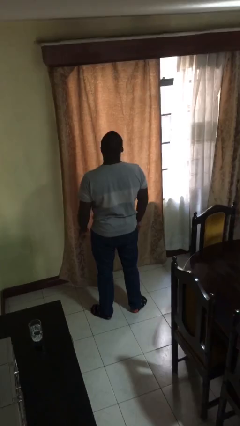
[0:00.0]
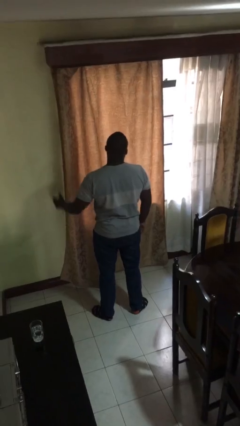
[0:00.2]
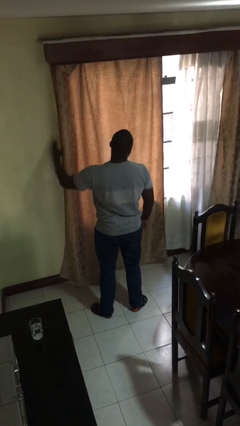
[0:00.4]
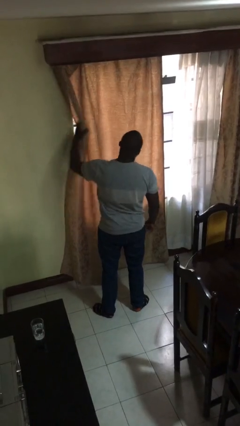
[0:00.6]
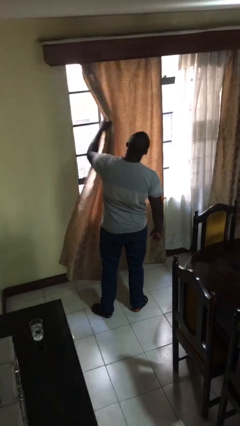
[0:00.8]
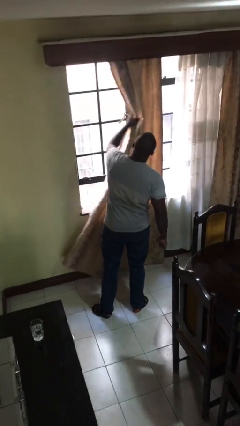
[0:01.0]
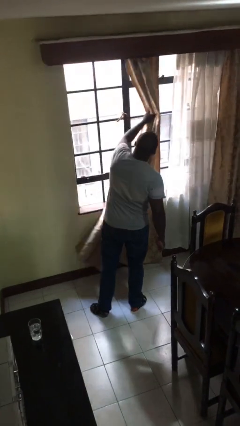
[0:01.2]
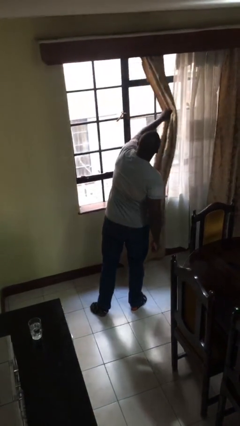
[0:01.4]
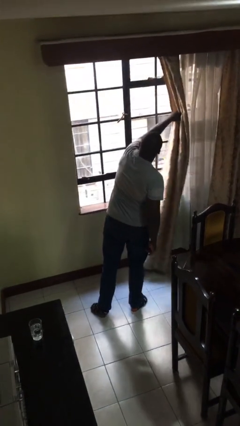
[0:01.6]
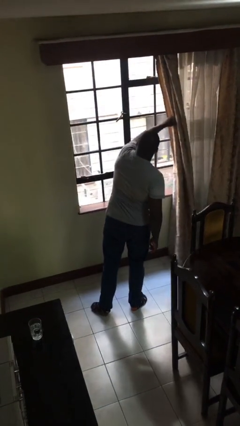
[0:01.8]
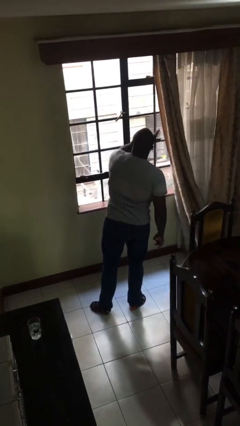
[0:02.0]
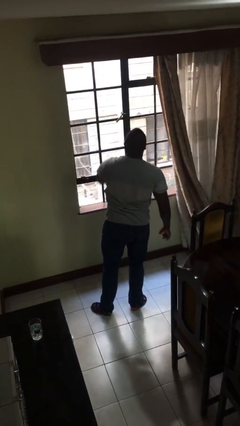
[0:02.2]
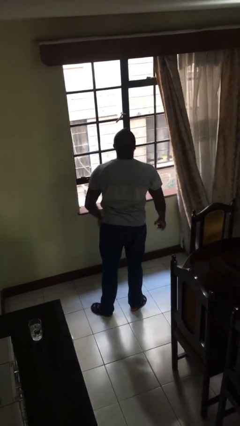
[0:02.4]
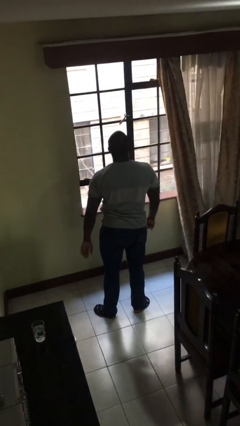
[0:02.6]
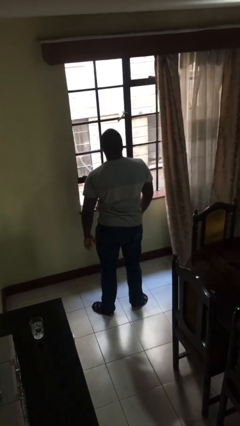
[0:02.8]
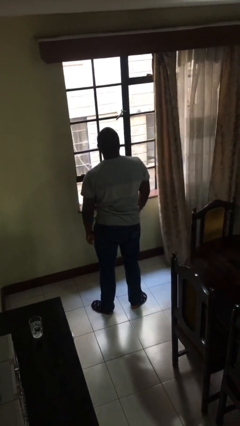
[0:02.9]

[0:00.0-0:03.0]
person opens curtains

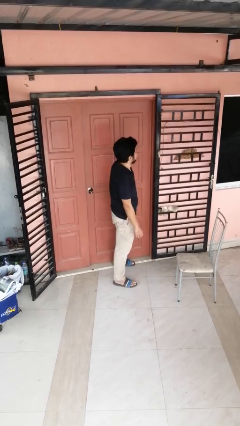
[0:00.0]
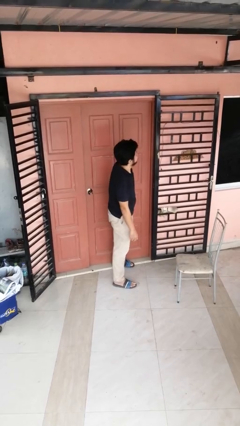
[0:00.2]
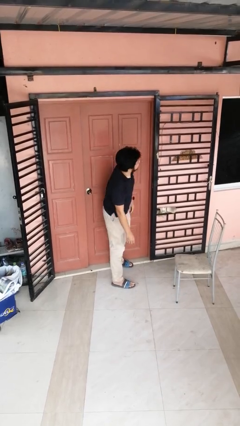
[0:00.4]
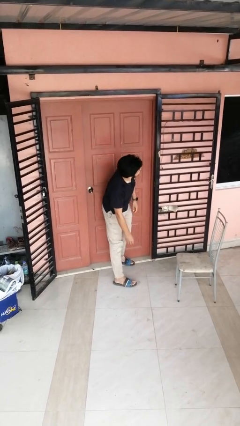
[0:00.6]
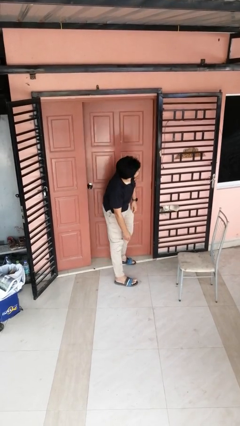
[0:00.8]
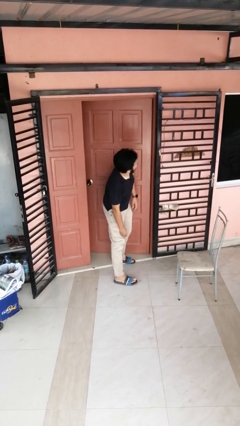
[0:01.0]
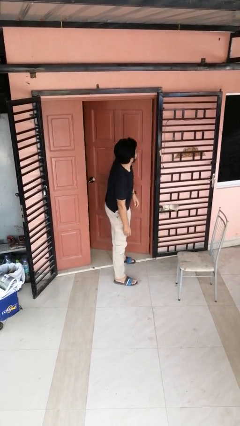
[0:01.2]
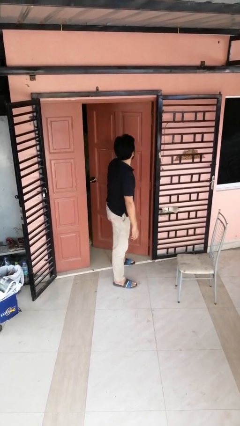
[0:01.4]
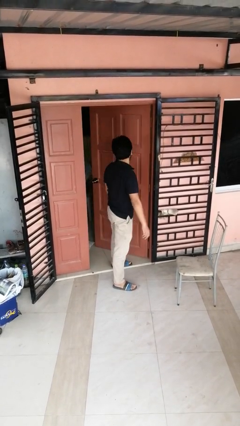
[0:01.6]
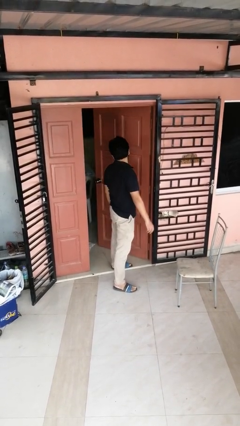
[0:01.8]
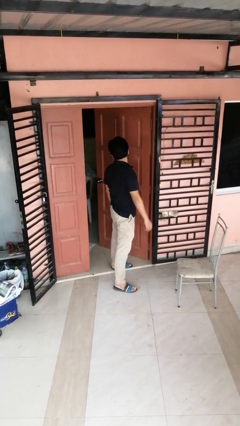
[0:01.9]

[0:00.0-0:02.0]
person opens facility door

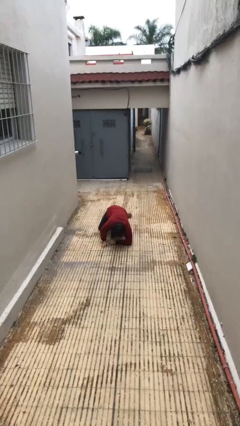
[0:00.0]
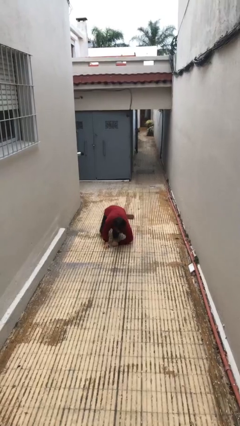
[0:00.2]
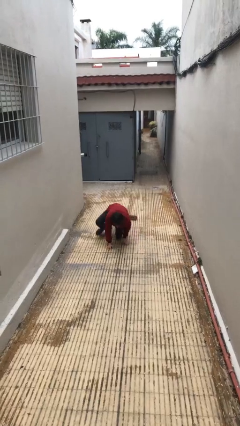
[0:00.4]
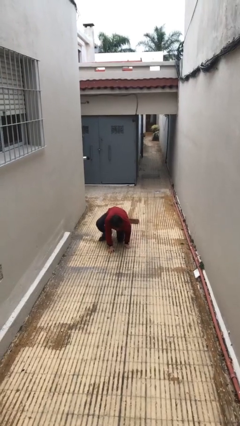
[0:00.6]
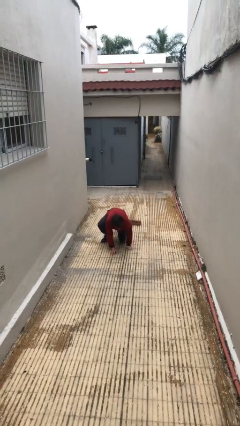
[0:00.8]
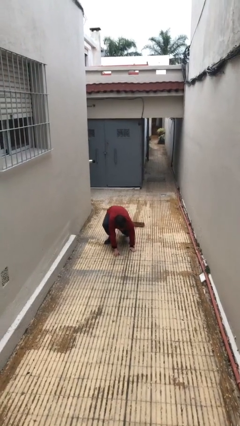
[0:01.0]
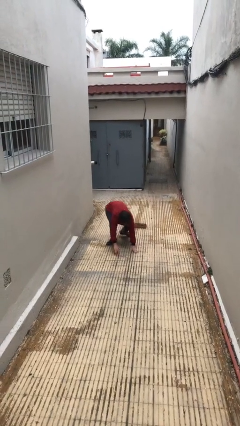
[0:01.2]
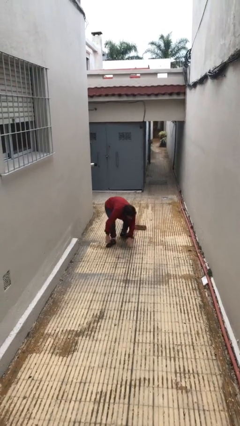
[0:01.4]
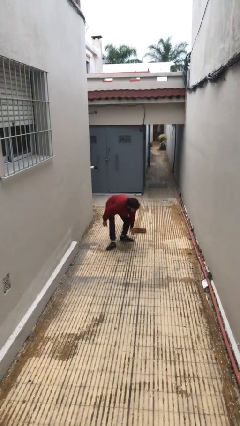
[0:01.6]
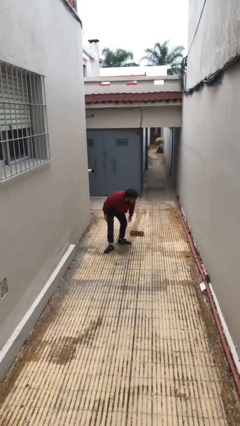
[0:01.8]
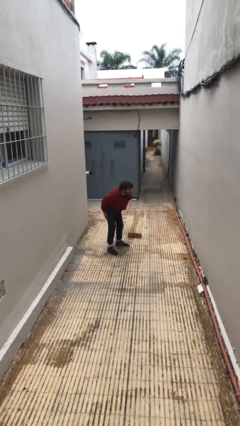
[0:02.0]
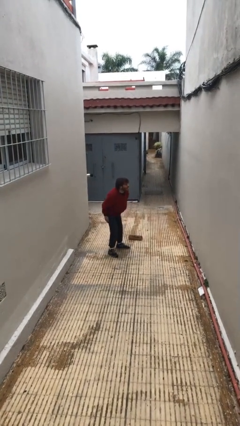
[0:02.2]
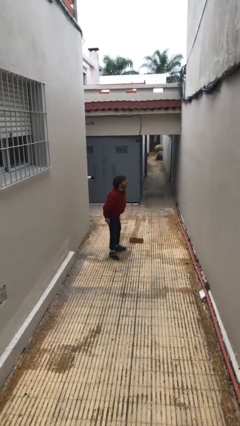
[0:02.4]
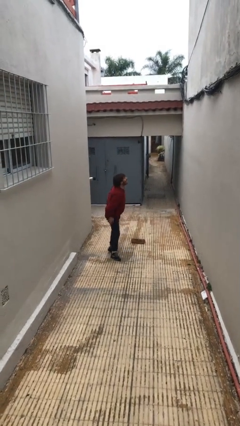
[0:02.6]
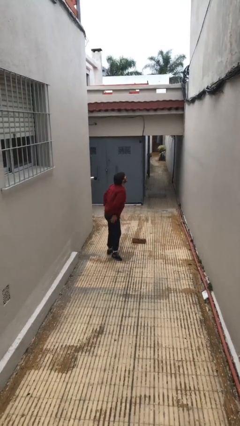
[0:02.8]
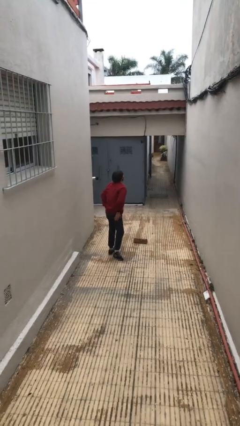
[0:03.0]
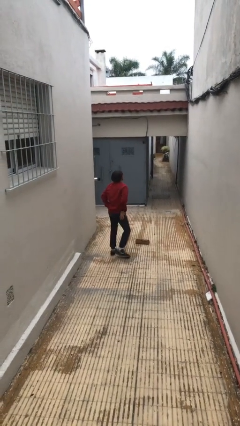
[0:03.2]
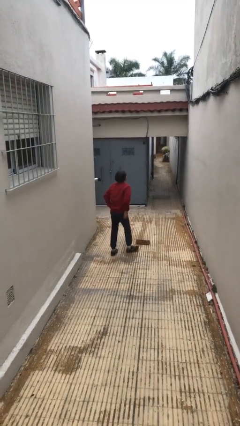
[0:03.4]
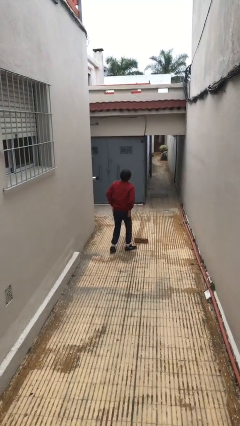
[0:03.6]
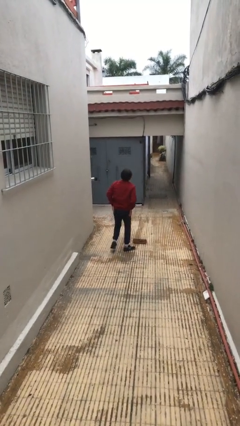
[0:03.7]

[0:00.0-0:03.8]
person stands up from floor

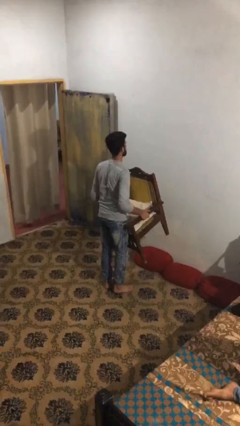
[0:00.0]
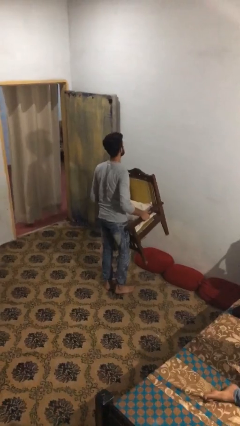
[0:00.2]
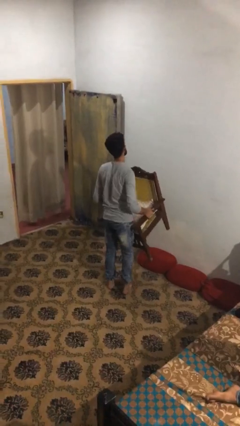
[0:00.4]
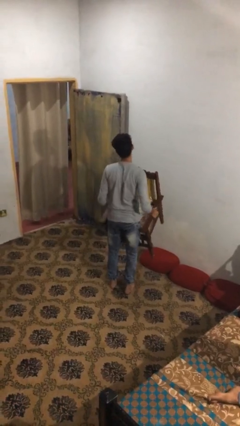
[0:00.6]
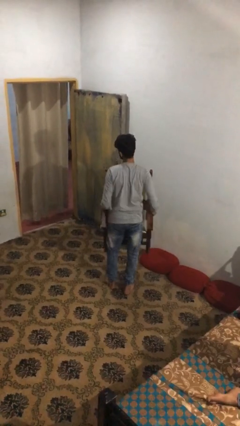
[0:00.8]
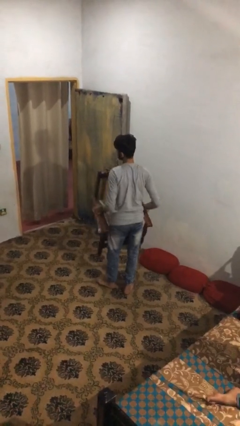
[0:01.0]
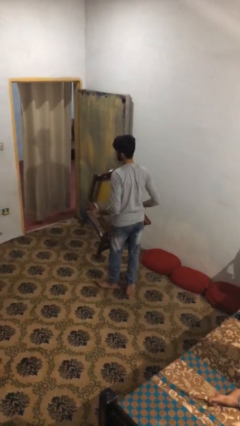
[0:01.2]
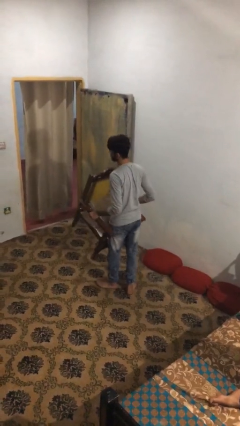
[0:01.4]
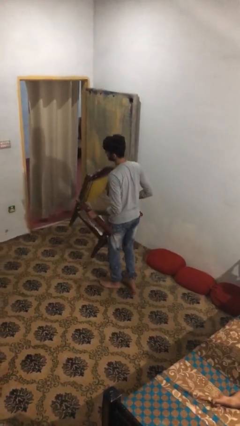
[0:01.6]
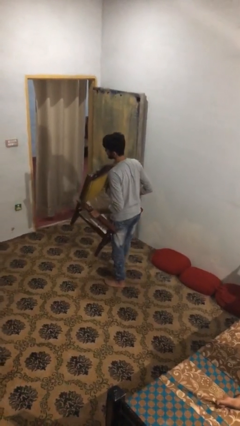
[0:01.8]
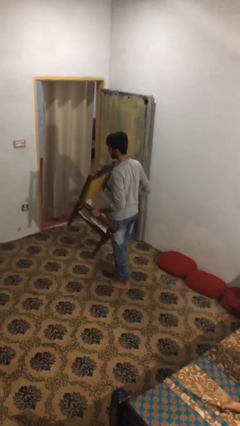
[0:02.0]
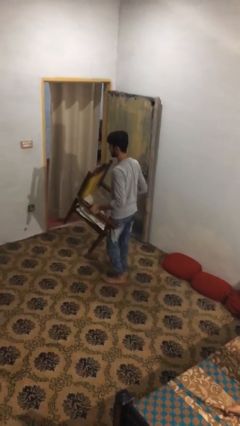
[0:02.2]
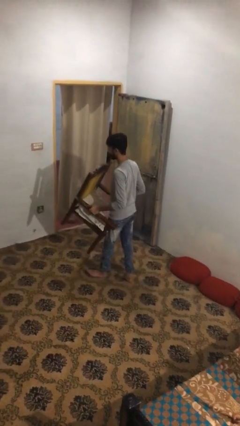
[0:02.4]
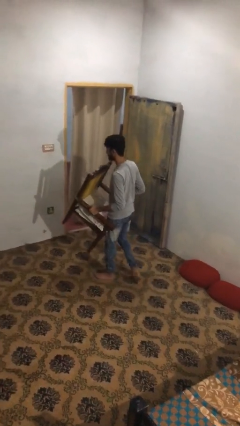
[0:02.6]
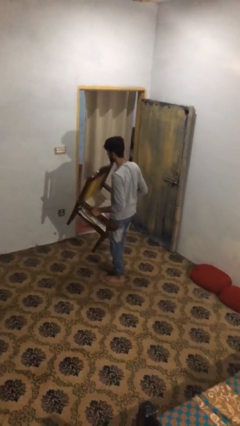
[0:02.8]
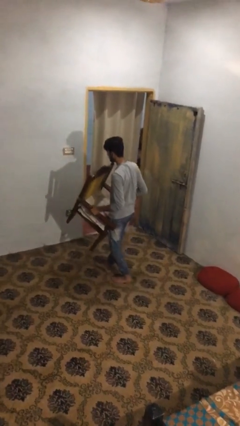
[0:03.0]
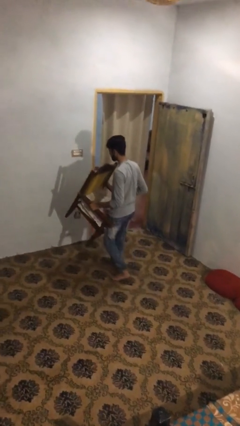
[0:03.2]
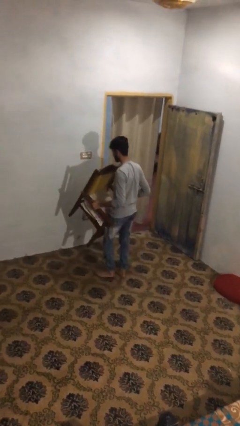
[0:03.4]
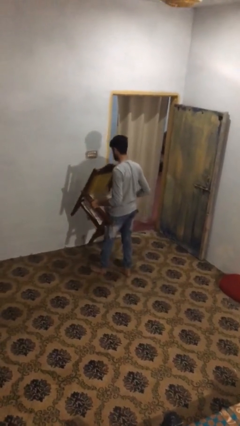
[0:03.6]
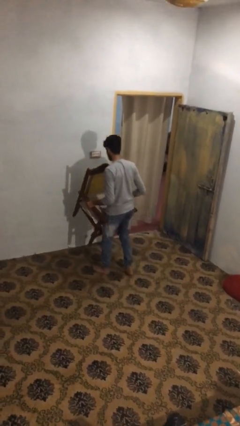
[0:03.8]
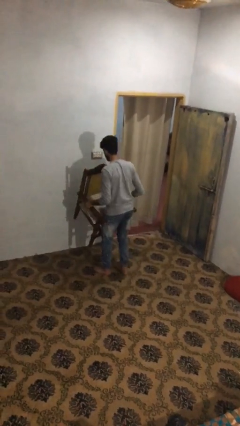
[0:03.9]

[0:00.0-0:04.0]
person carries heavy object

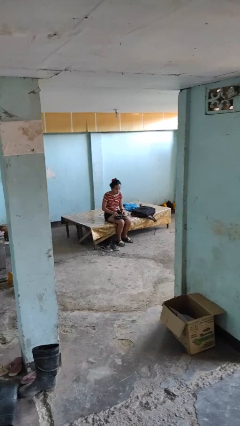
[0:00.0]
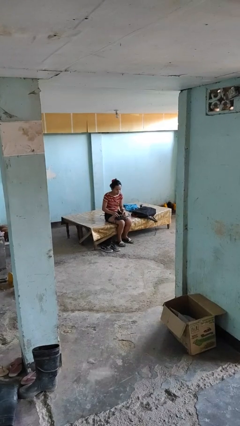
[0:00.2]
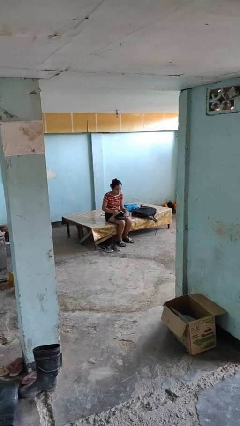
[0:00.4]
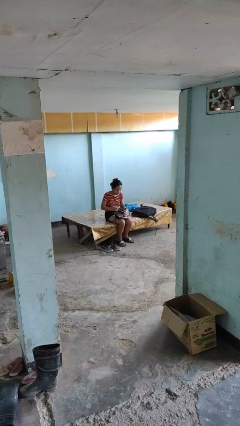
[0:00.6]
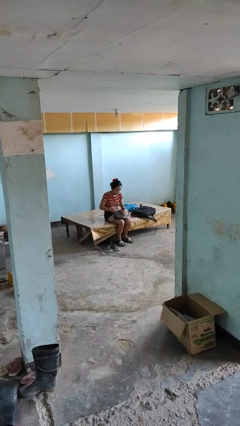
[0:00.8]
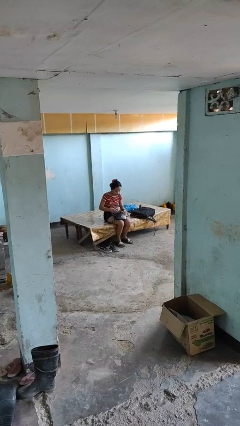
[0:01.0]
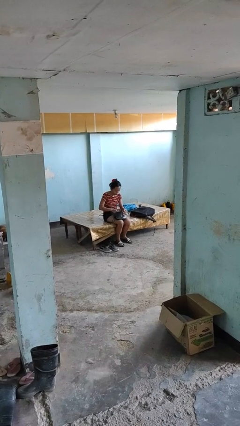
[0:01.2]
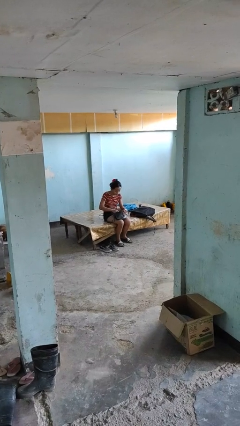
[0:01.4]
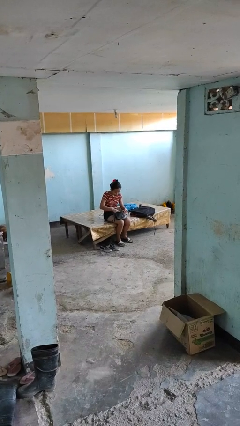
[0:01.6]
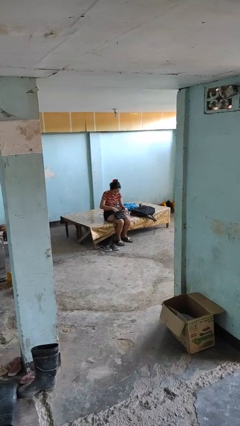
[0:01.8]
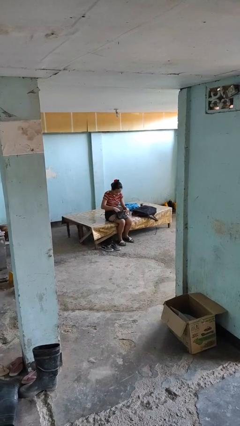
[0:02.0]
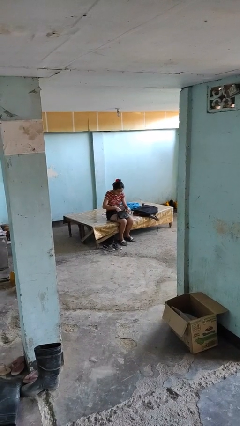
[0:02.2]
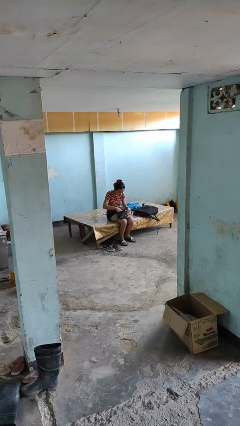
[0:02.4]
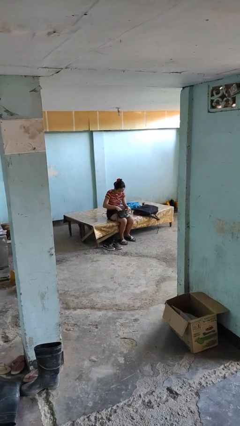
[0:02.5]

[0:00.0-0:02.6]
person searches in purse

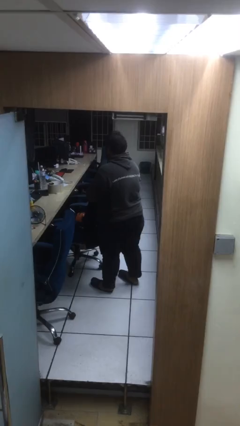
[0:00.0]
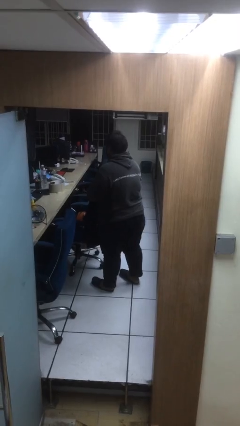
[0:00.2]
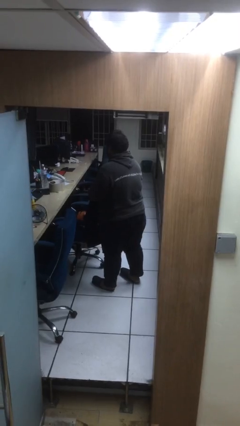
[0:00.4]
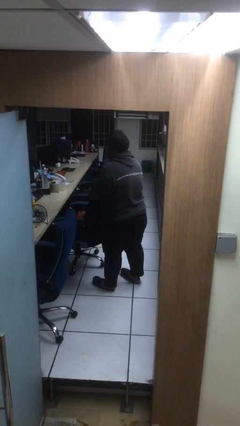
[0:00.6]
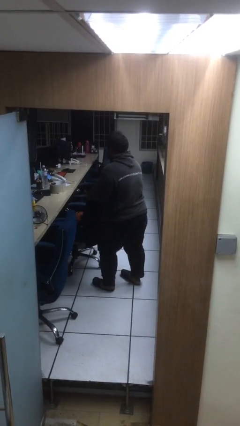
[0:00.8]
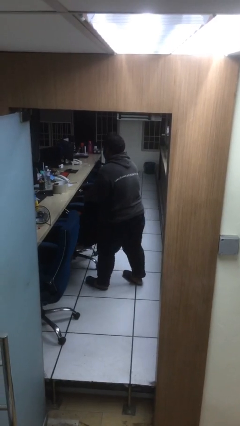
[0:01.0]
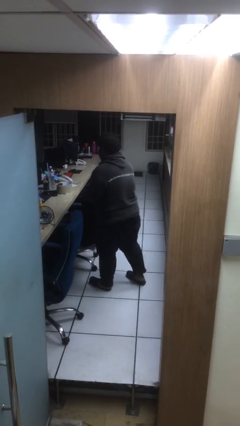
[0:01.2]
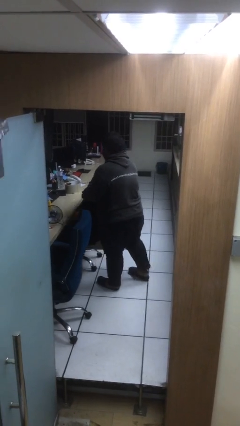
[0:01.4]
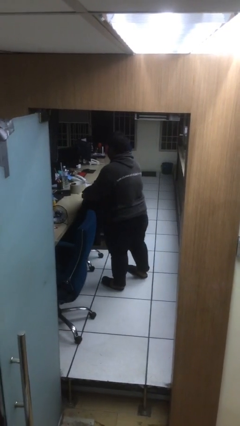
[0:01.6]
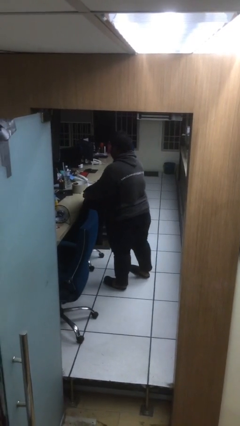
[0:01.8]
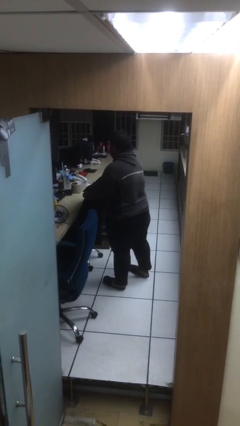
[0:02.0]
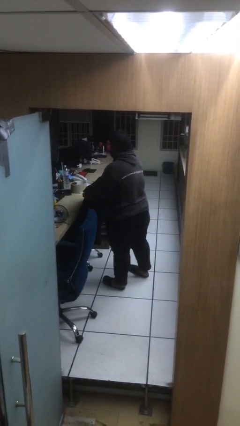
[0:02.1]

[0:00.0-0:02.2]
person pushes in chair
